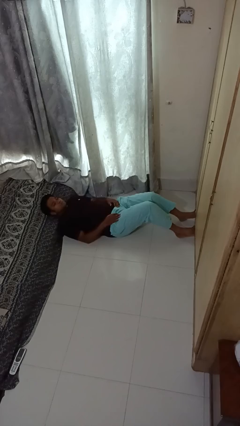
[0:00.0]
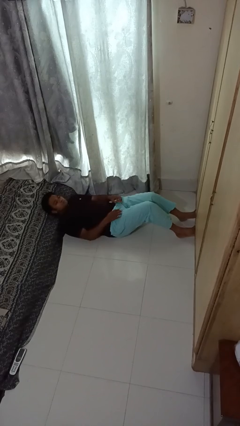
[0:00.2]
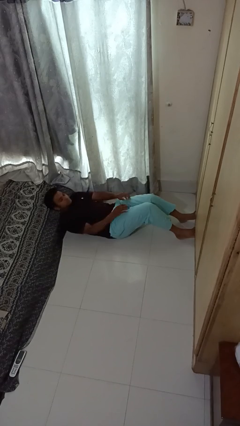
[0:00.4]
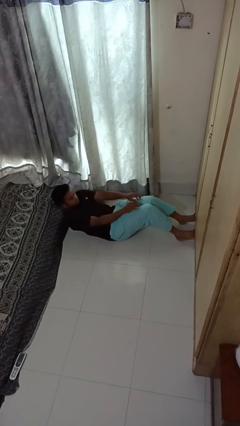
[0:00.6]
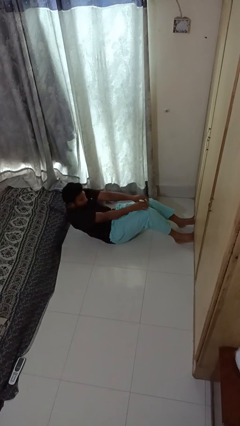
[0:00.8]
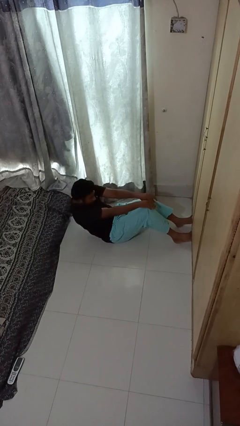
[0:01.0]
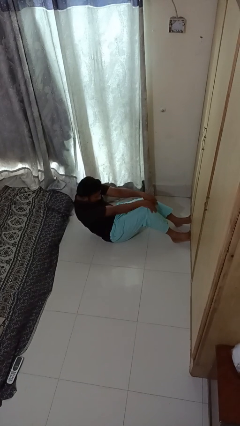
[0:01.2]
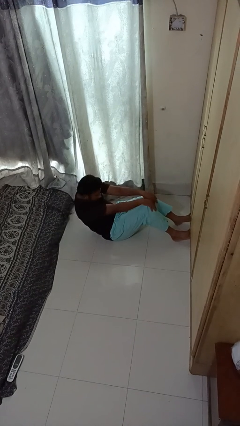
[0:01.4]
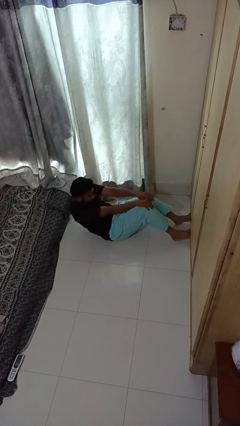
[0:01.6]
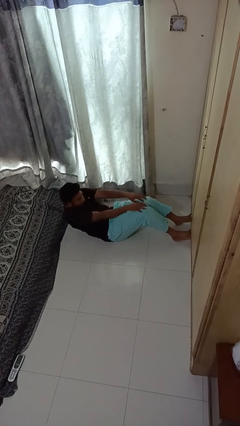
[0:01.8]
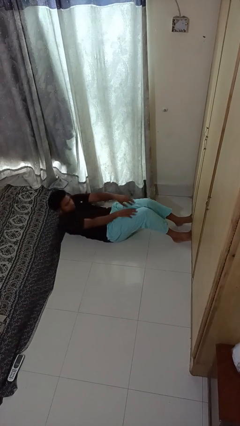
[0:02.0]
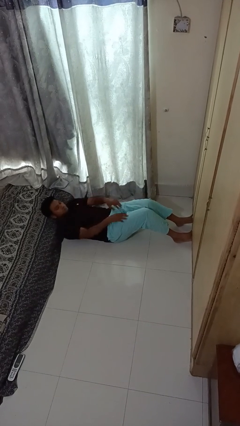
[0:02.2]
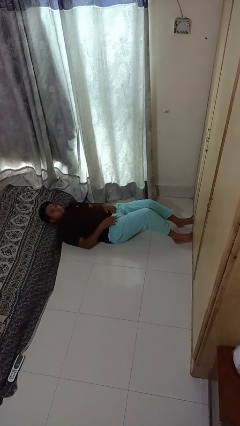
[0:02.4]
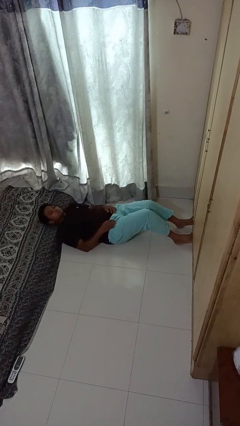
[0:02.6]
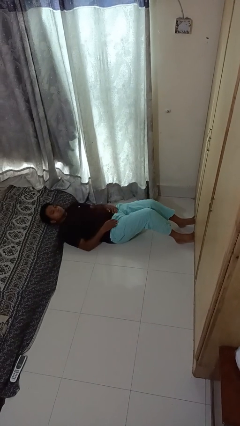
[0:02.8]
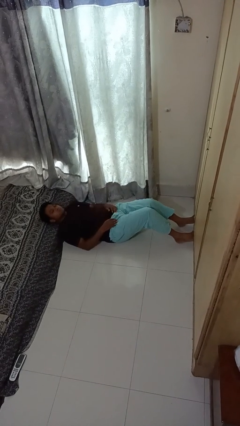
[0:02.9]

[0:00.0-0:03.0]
person exercises with situp

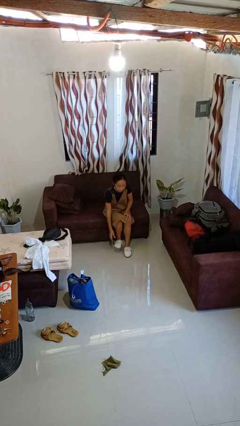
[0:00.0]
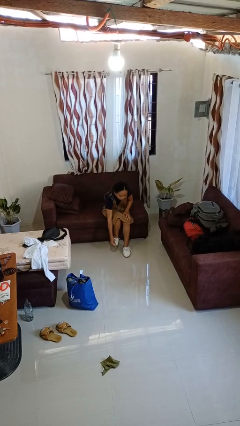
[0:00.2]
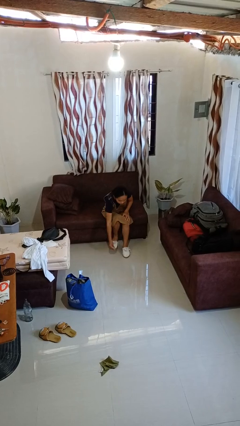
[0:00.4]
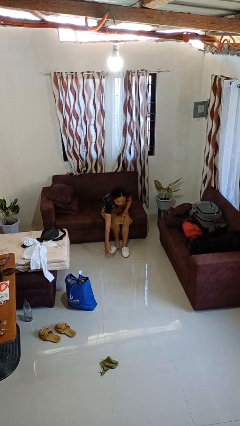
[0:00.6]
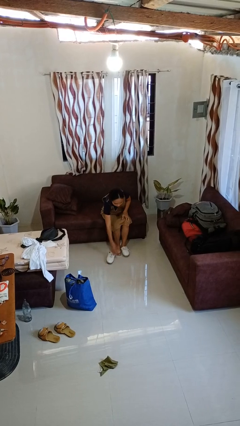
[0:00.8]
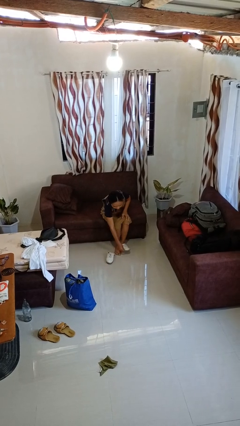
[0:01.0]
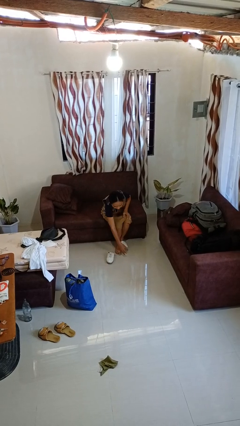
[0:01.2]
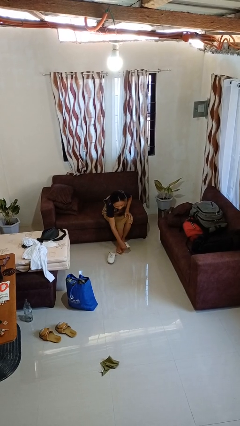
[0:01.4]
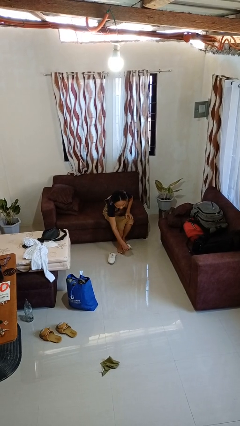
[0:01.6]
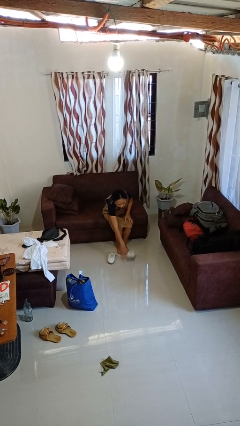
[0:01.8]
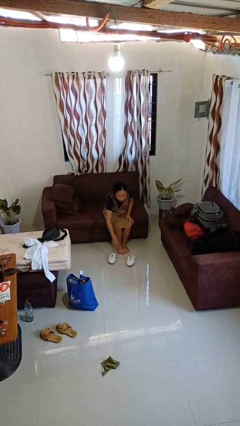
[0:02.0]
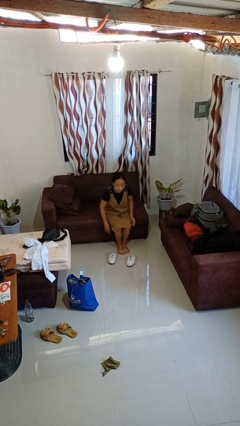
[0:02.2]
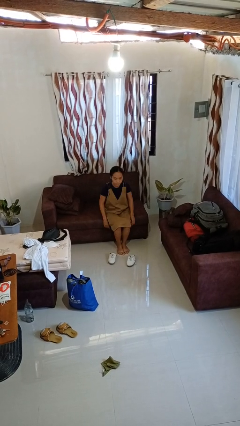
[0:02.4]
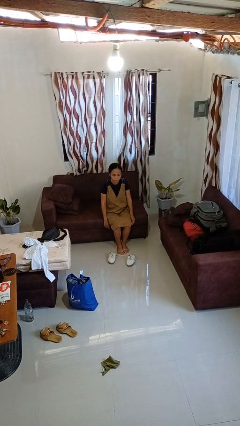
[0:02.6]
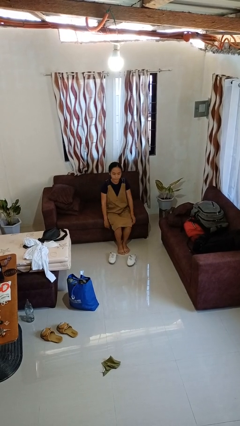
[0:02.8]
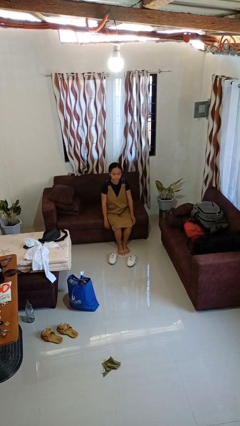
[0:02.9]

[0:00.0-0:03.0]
person takes off shoes

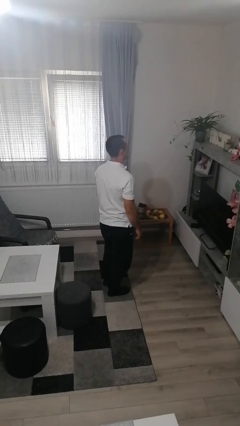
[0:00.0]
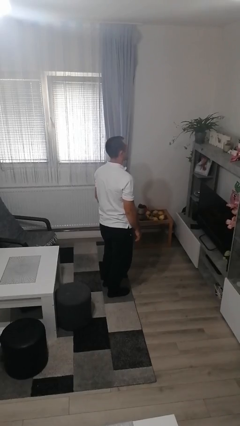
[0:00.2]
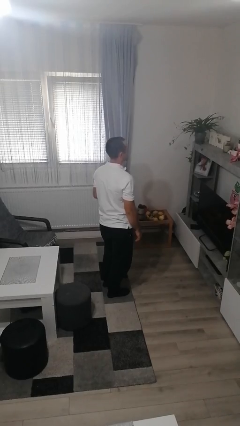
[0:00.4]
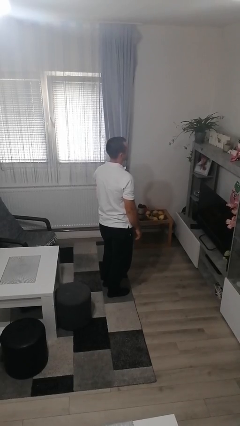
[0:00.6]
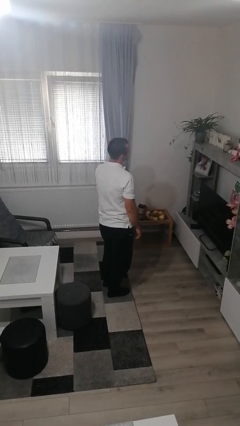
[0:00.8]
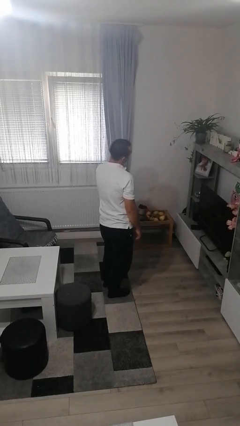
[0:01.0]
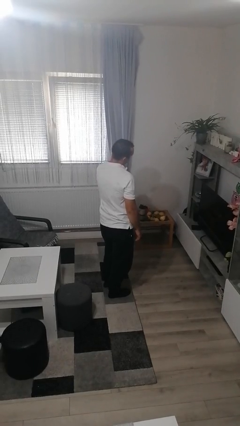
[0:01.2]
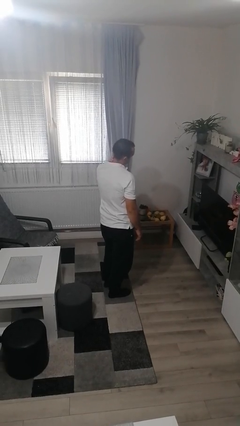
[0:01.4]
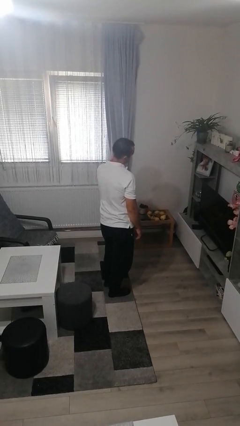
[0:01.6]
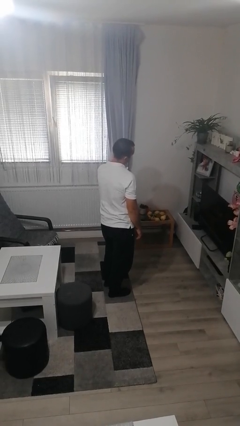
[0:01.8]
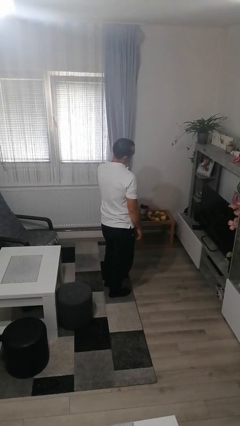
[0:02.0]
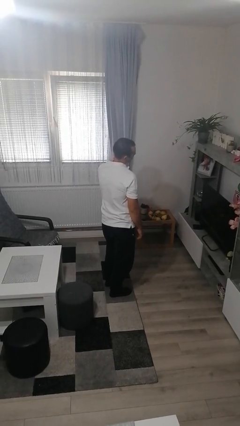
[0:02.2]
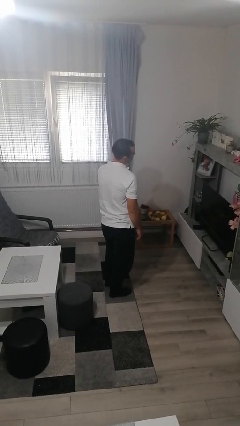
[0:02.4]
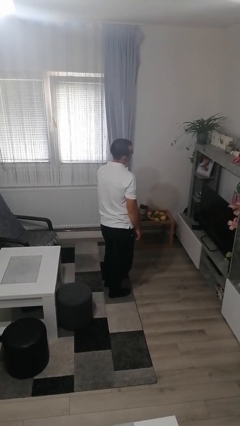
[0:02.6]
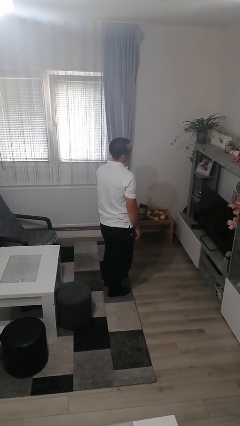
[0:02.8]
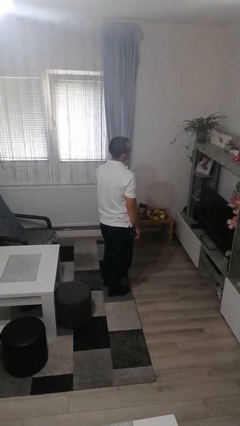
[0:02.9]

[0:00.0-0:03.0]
person rubs neck

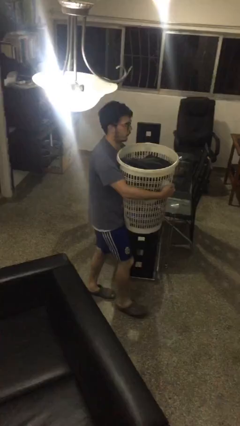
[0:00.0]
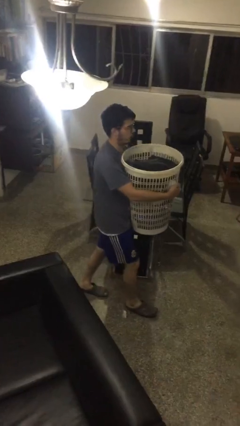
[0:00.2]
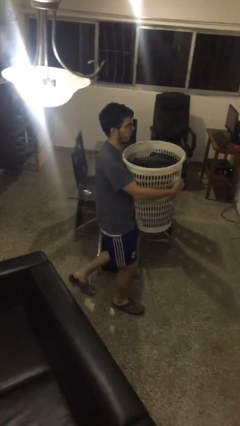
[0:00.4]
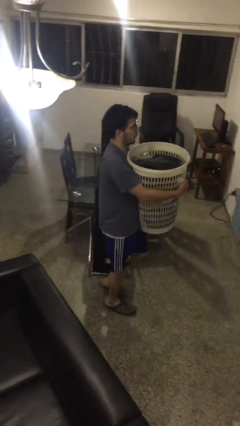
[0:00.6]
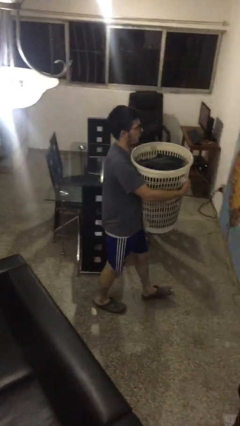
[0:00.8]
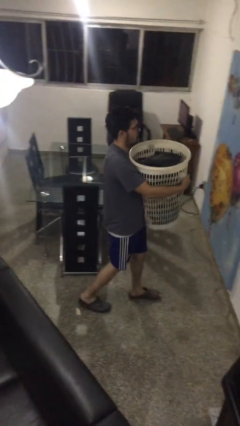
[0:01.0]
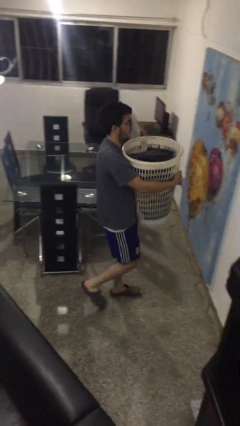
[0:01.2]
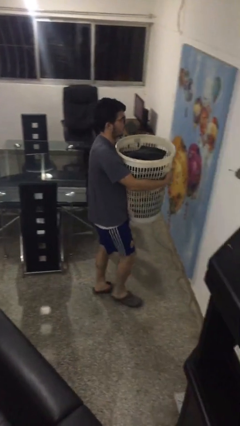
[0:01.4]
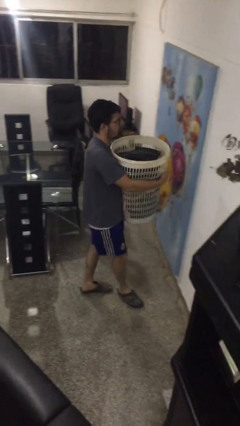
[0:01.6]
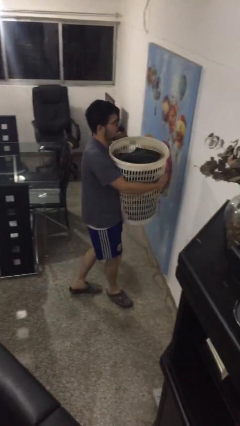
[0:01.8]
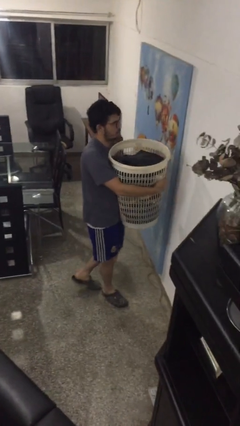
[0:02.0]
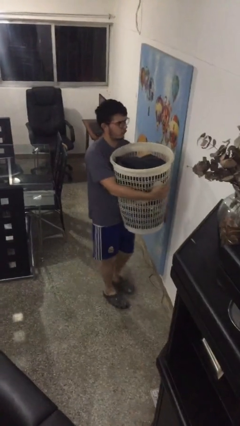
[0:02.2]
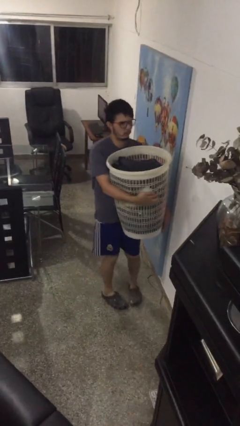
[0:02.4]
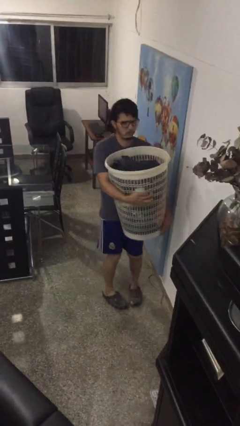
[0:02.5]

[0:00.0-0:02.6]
person carries laundry basket

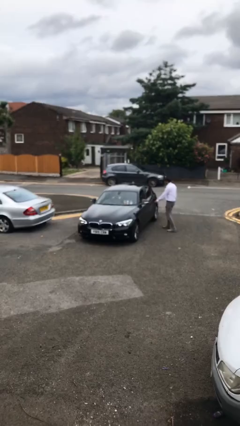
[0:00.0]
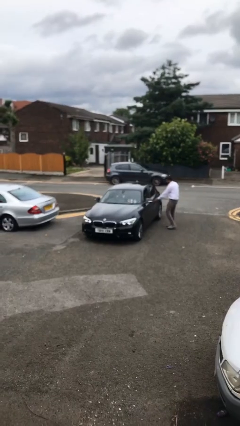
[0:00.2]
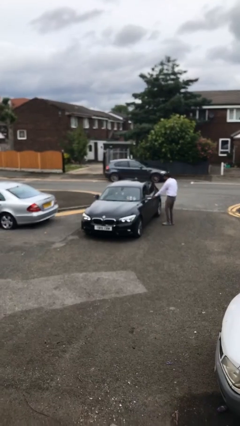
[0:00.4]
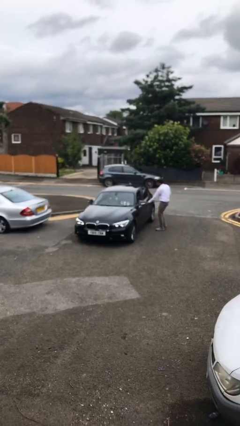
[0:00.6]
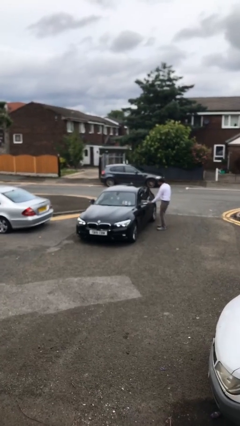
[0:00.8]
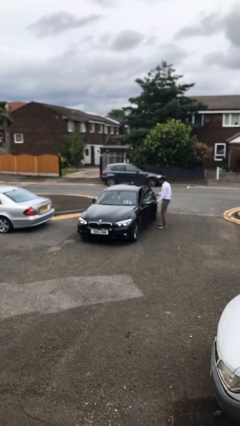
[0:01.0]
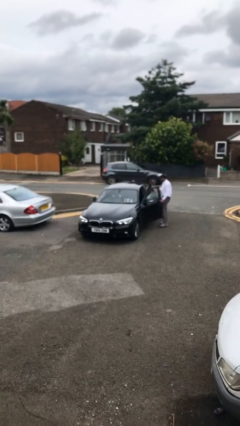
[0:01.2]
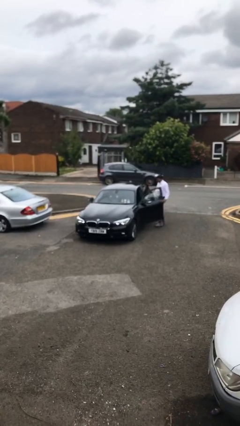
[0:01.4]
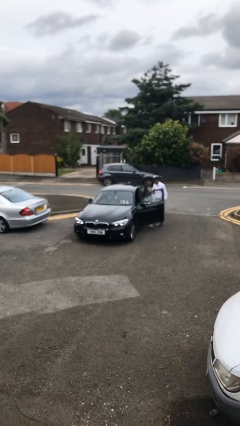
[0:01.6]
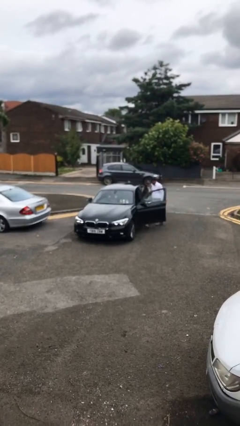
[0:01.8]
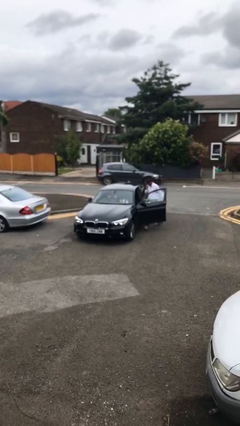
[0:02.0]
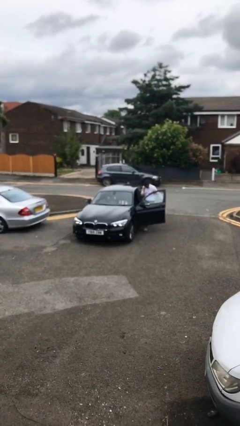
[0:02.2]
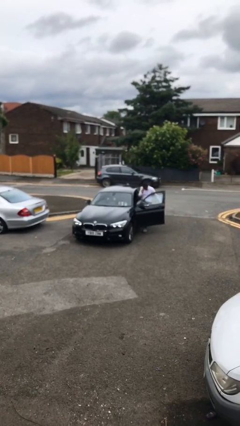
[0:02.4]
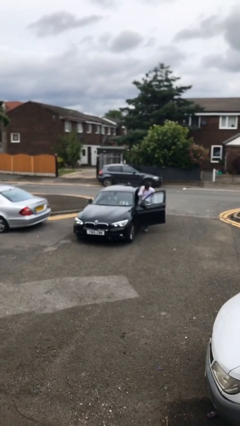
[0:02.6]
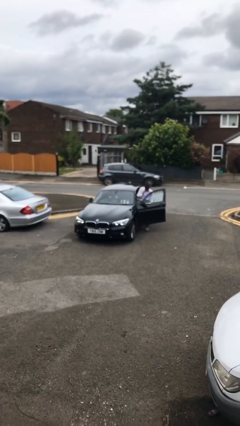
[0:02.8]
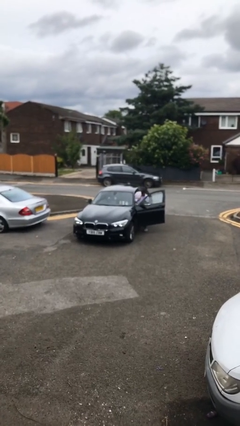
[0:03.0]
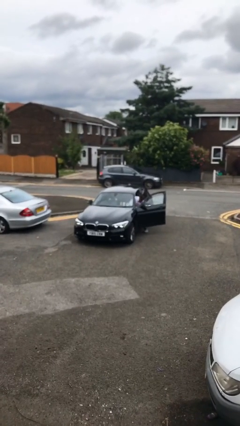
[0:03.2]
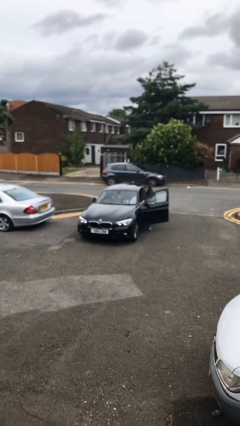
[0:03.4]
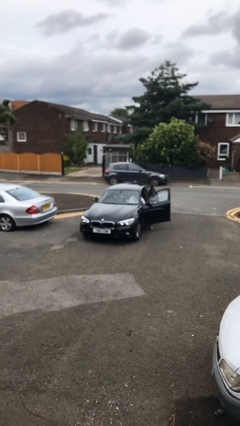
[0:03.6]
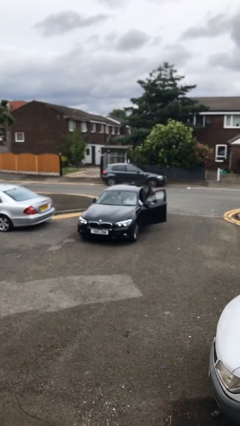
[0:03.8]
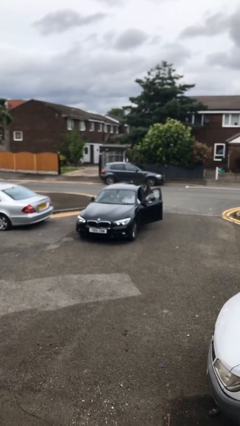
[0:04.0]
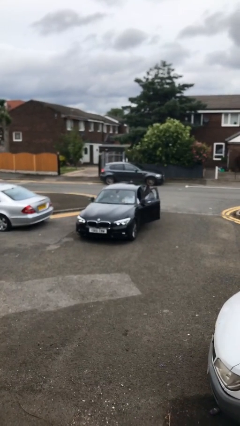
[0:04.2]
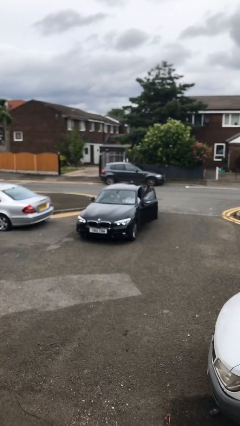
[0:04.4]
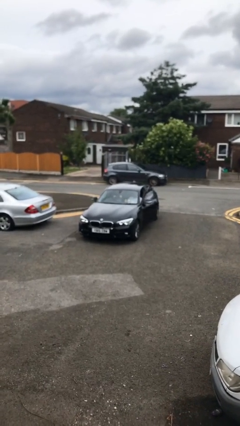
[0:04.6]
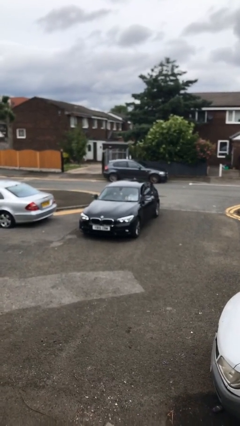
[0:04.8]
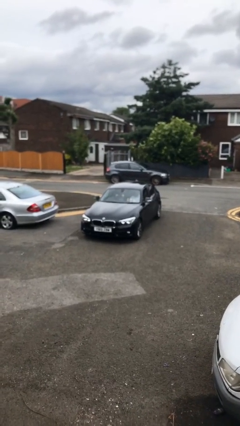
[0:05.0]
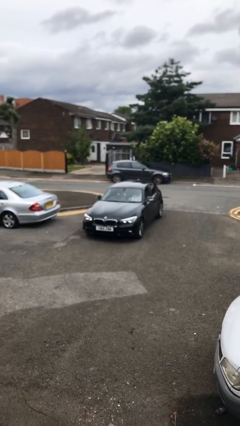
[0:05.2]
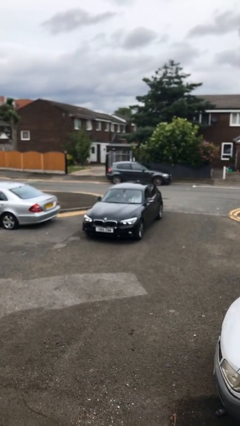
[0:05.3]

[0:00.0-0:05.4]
car picks up person

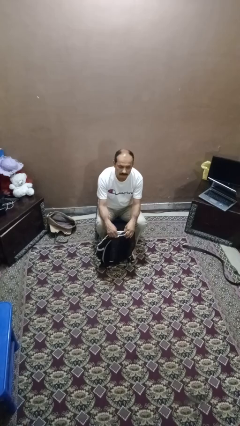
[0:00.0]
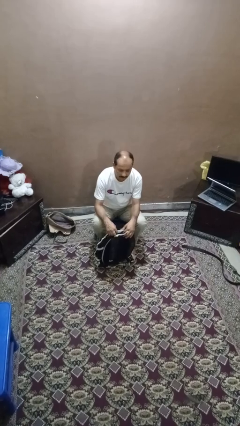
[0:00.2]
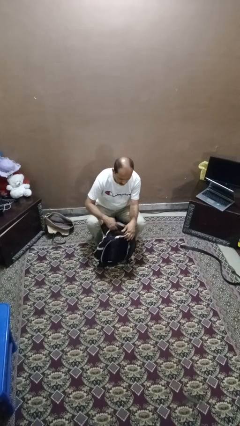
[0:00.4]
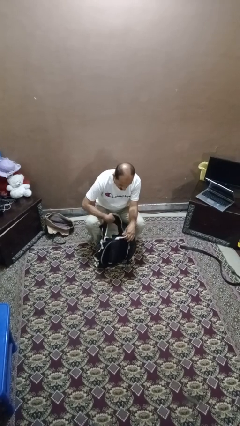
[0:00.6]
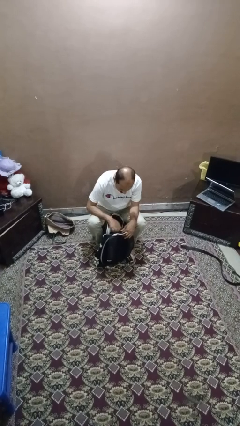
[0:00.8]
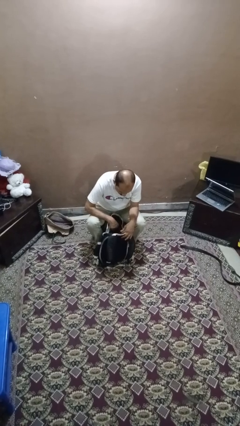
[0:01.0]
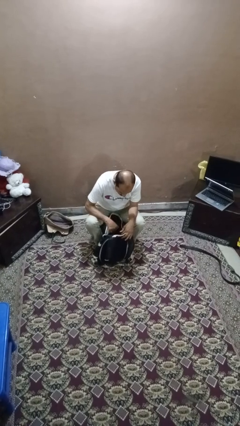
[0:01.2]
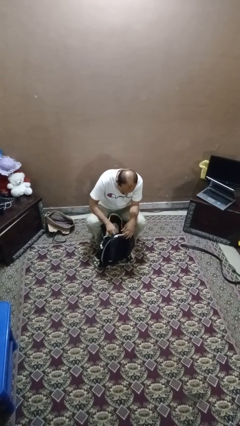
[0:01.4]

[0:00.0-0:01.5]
person searches in backpack
